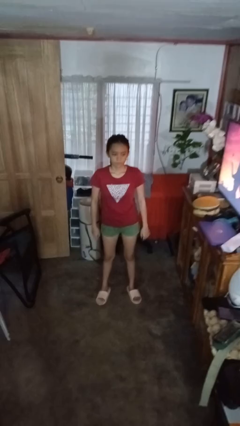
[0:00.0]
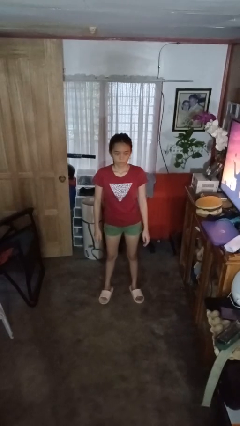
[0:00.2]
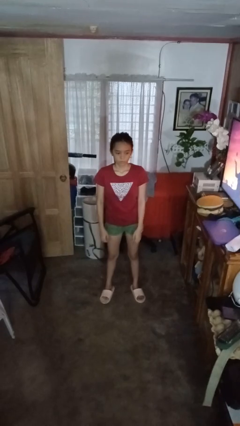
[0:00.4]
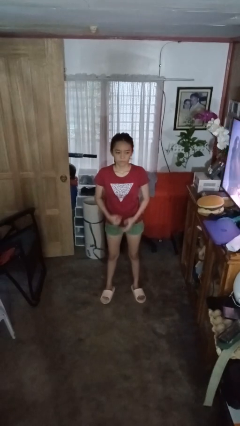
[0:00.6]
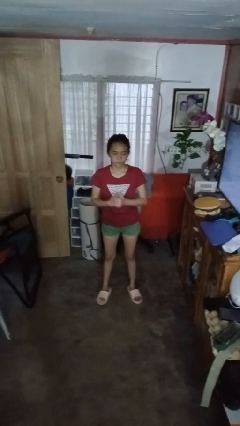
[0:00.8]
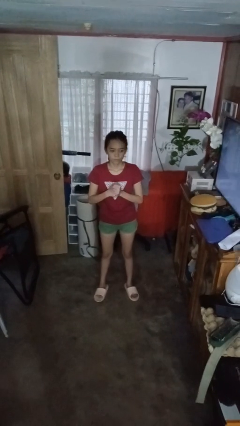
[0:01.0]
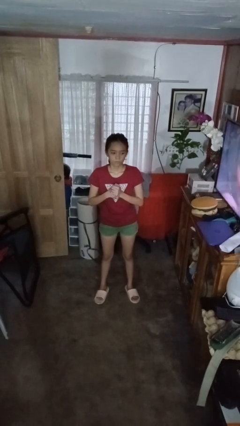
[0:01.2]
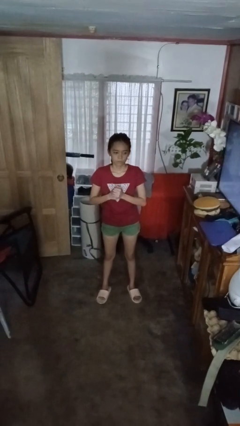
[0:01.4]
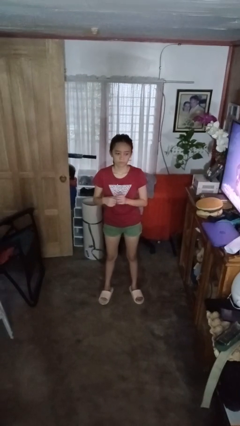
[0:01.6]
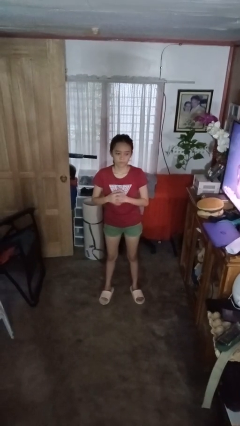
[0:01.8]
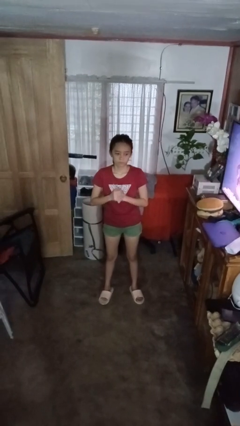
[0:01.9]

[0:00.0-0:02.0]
person cracks knuckles

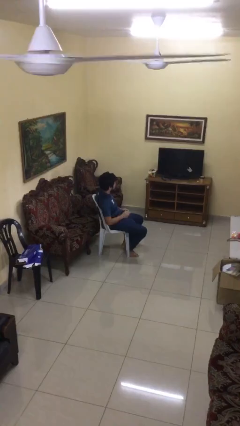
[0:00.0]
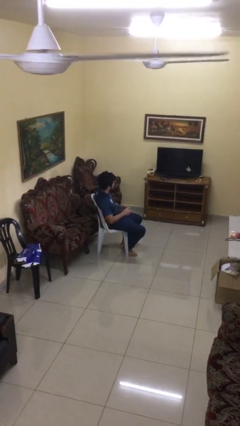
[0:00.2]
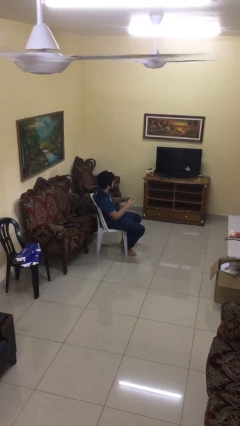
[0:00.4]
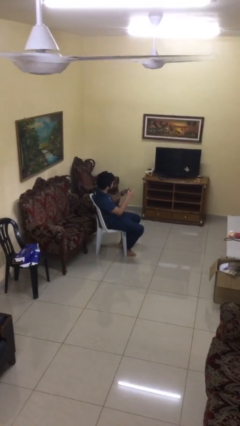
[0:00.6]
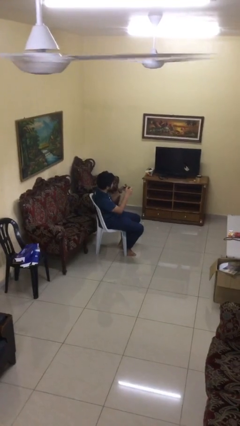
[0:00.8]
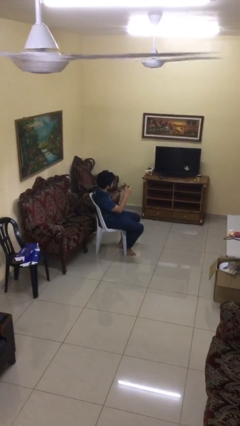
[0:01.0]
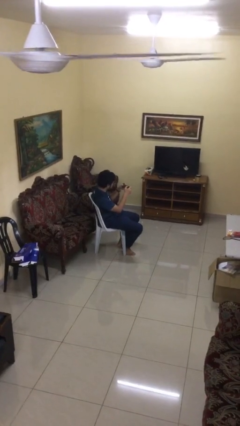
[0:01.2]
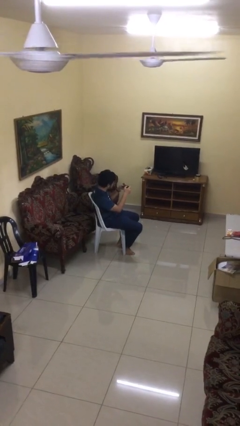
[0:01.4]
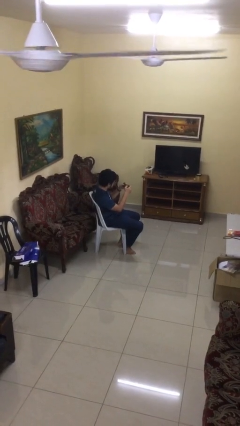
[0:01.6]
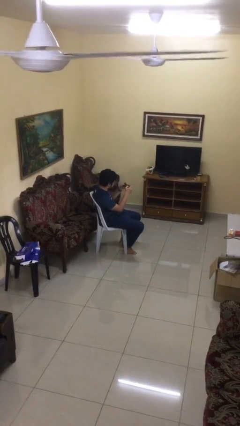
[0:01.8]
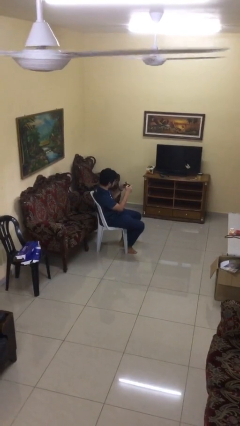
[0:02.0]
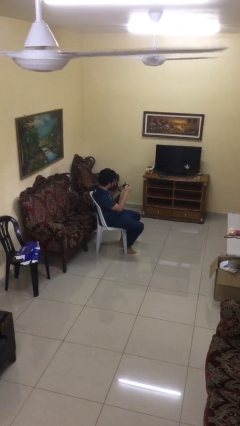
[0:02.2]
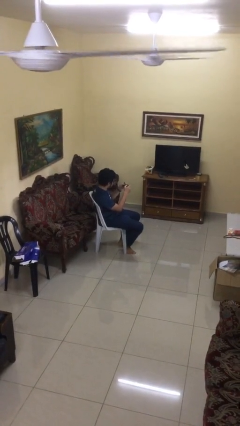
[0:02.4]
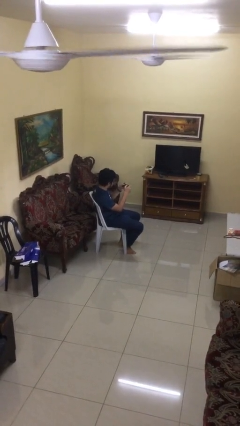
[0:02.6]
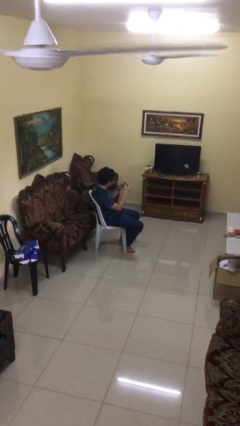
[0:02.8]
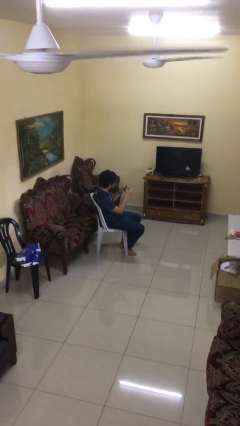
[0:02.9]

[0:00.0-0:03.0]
person interacts with handheld game

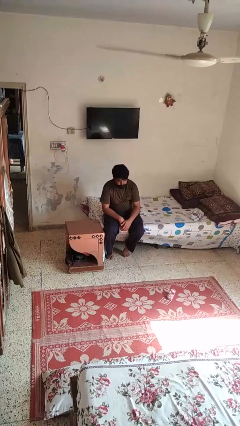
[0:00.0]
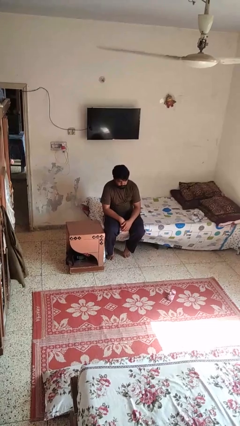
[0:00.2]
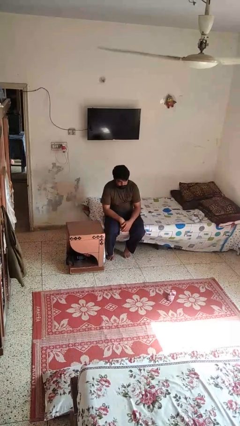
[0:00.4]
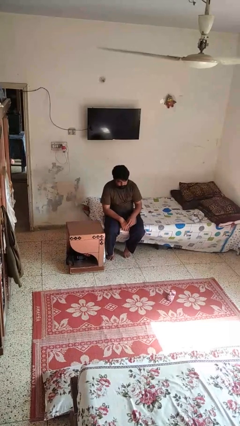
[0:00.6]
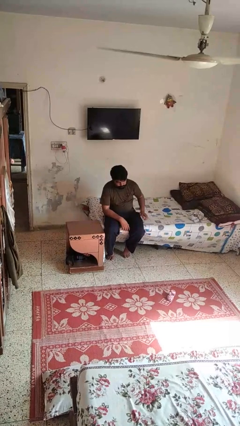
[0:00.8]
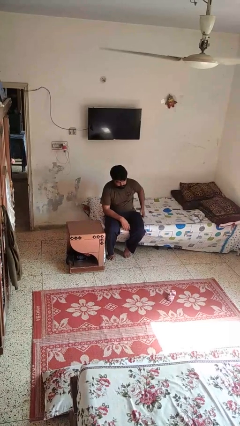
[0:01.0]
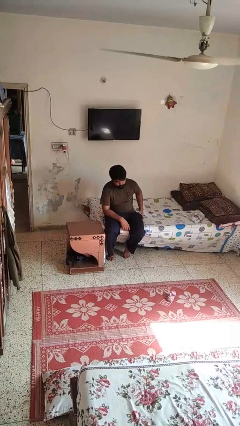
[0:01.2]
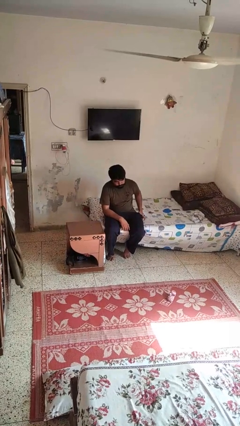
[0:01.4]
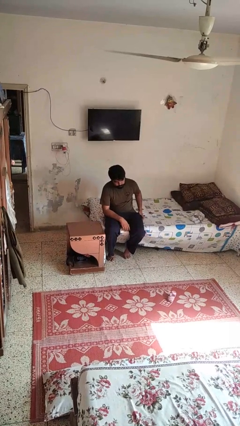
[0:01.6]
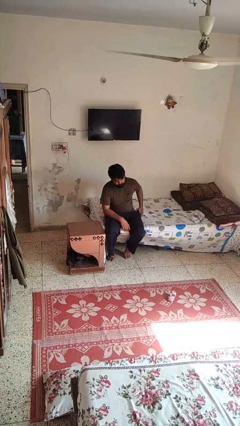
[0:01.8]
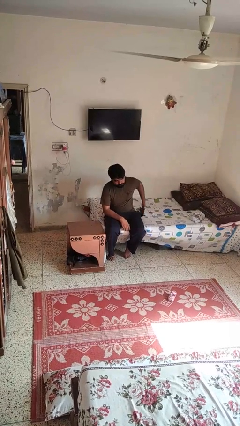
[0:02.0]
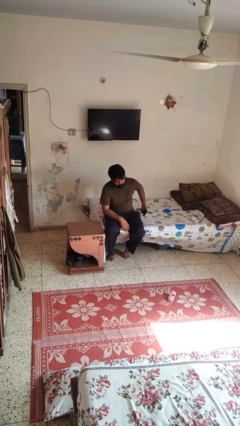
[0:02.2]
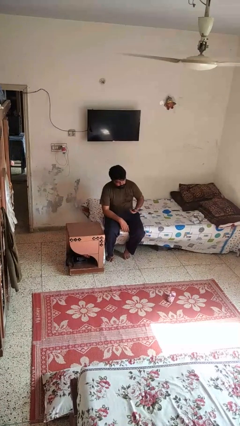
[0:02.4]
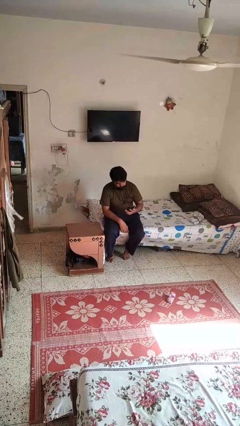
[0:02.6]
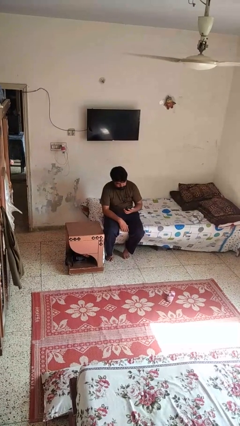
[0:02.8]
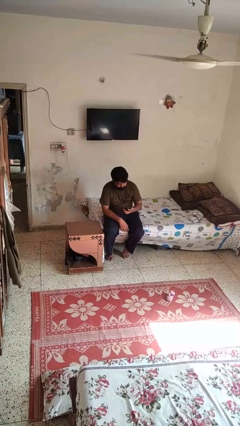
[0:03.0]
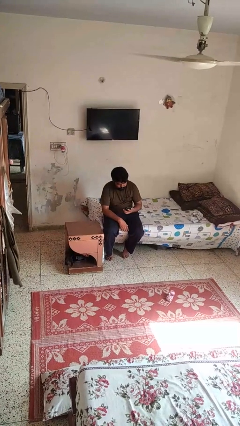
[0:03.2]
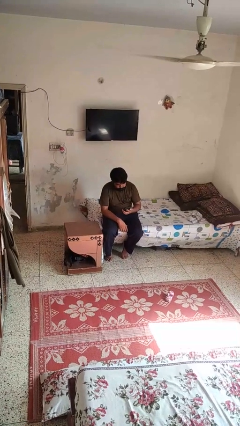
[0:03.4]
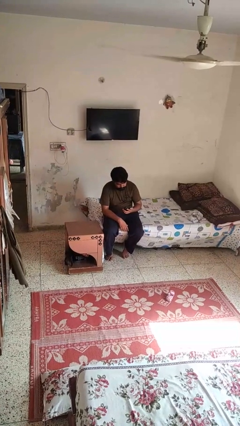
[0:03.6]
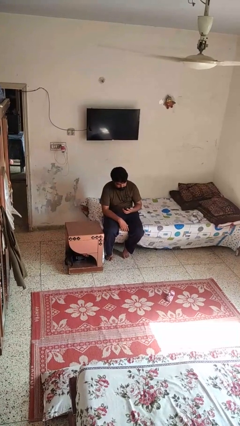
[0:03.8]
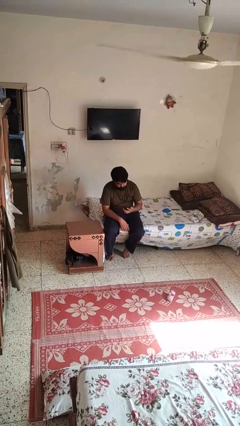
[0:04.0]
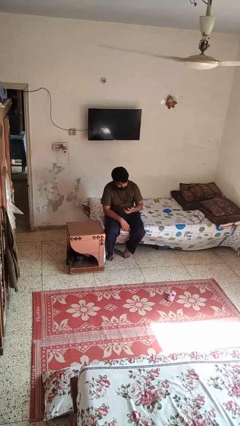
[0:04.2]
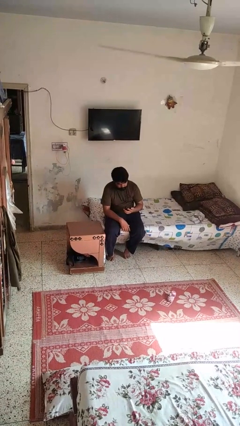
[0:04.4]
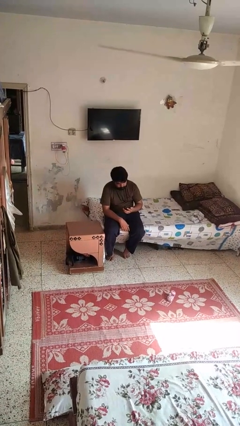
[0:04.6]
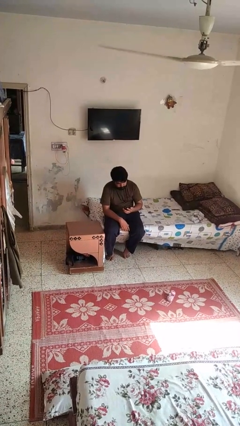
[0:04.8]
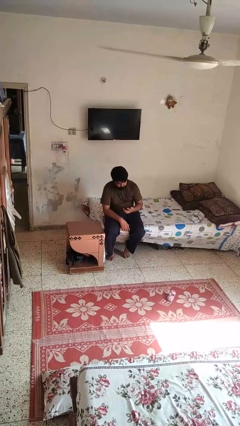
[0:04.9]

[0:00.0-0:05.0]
person takes phone from pocket

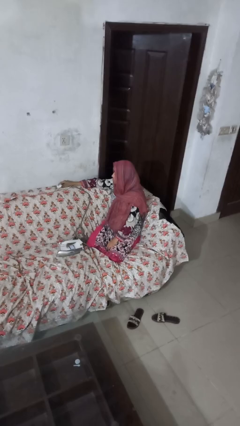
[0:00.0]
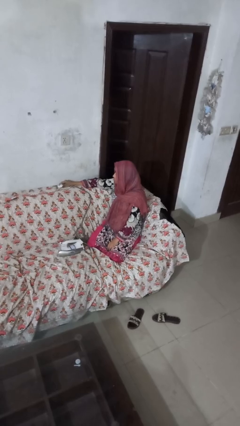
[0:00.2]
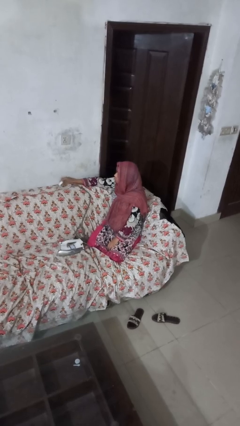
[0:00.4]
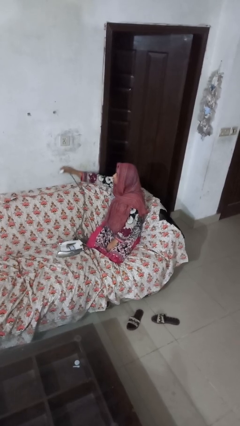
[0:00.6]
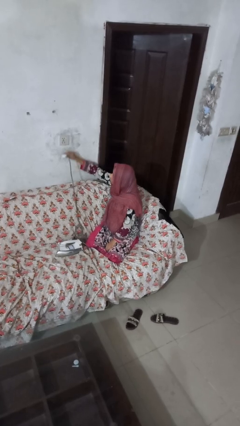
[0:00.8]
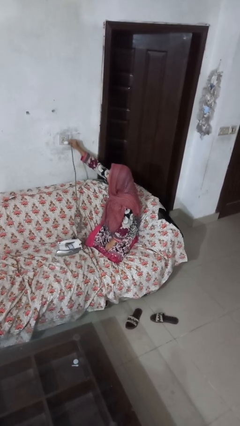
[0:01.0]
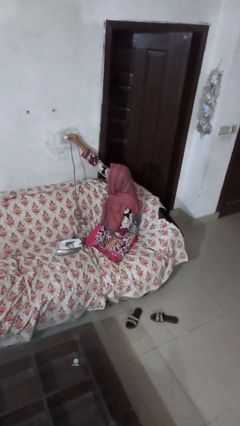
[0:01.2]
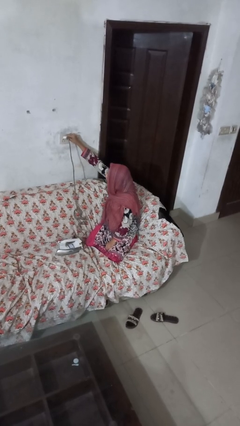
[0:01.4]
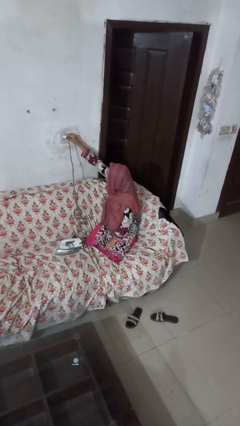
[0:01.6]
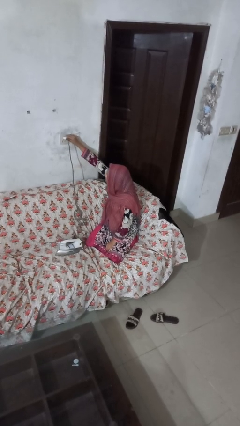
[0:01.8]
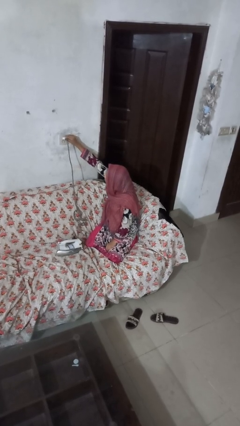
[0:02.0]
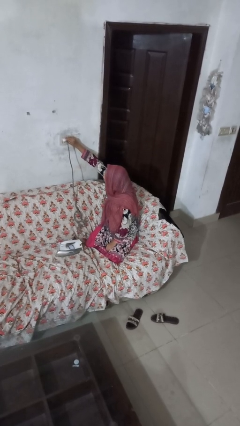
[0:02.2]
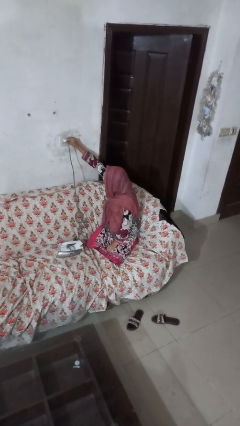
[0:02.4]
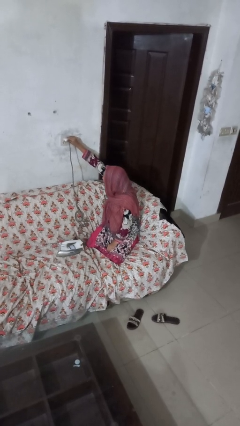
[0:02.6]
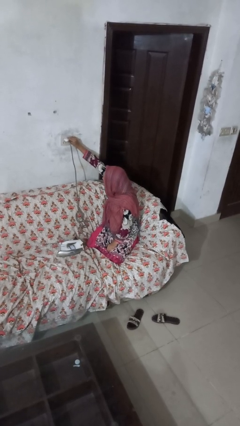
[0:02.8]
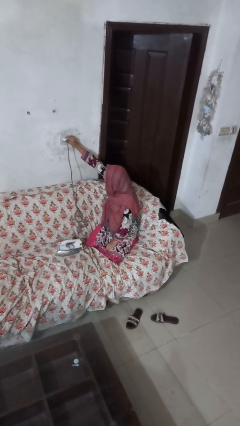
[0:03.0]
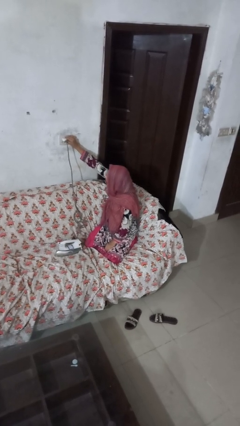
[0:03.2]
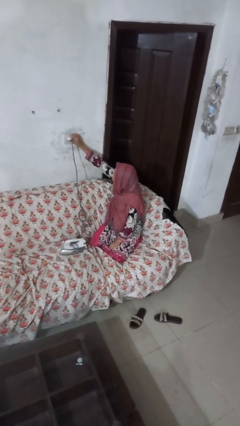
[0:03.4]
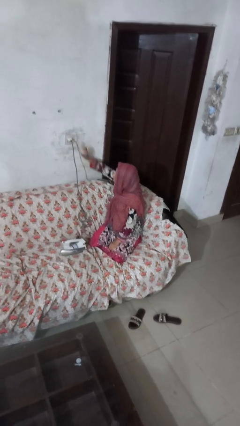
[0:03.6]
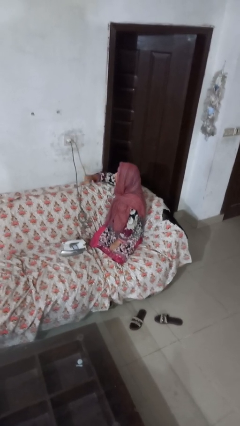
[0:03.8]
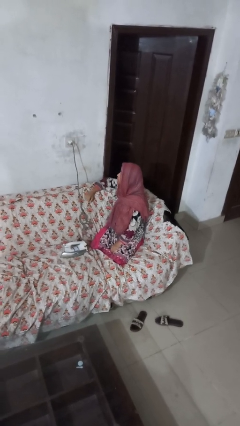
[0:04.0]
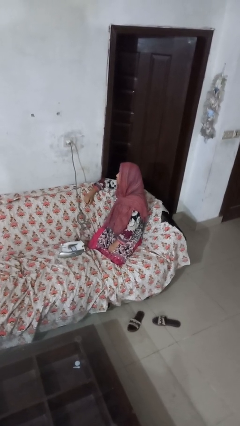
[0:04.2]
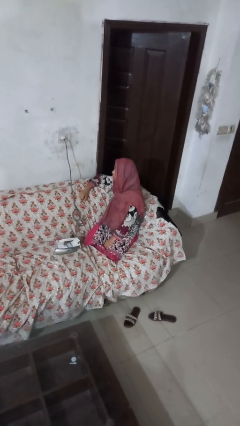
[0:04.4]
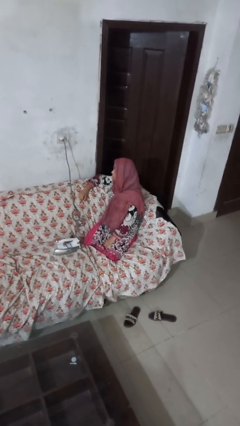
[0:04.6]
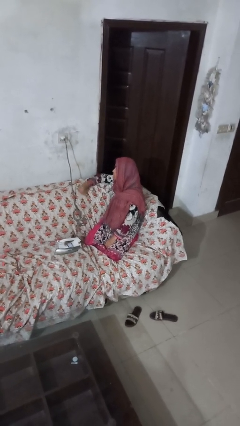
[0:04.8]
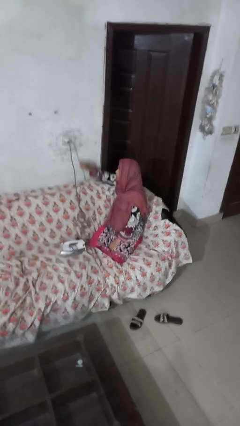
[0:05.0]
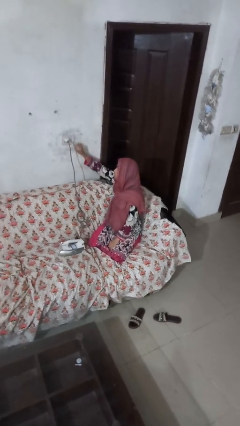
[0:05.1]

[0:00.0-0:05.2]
person plugs into electrical socket

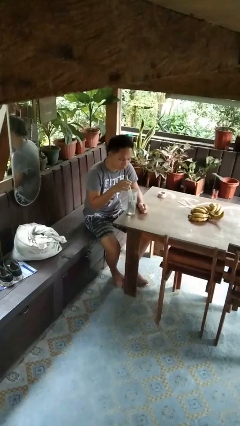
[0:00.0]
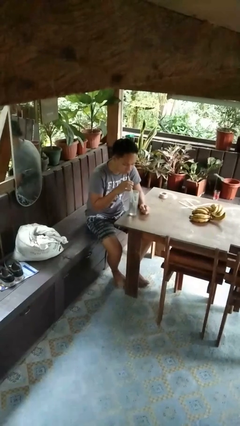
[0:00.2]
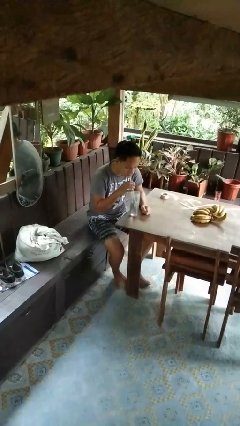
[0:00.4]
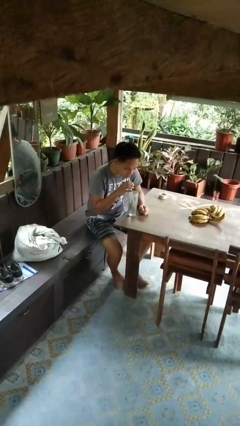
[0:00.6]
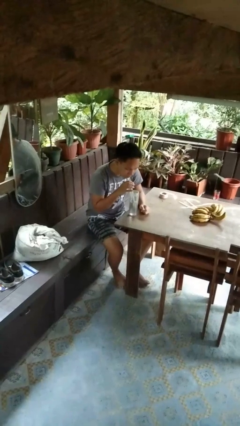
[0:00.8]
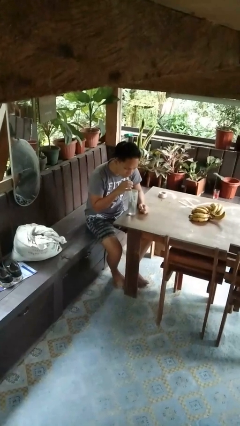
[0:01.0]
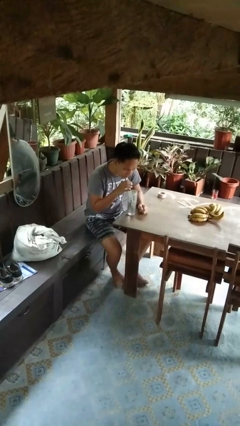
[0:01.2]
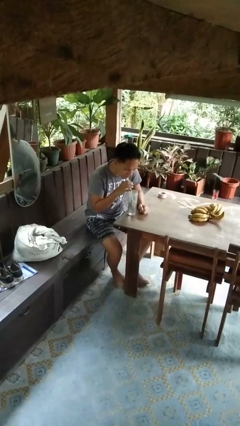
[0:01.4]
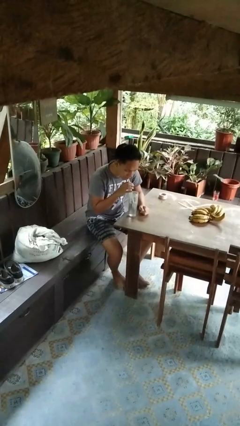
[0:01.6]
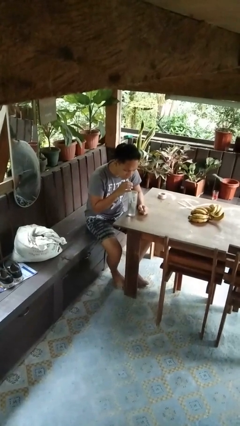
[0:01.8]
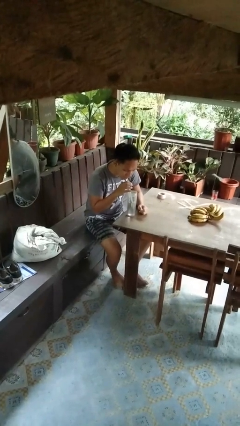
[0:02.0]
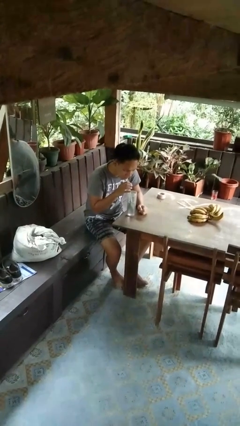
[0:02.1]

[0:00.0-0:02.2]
person drinks from straw
